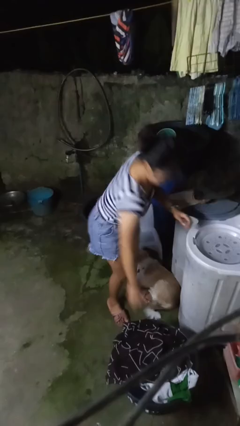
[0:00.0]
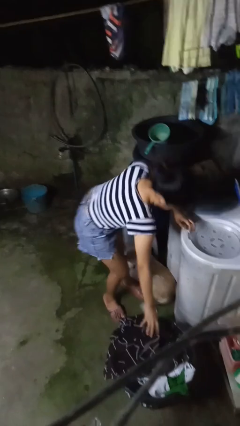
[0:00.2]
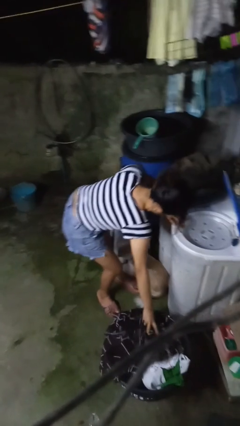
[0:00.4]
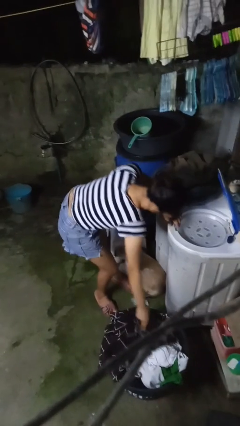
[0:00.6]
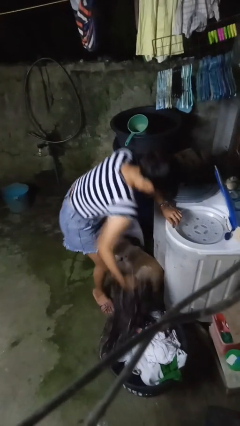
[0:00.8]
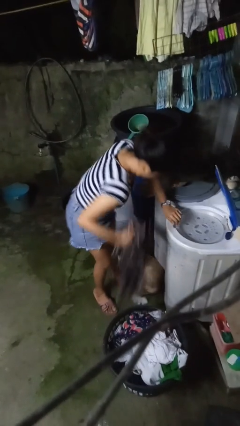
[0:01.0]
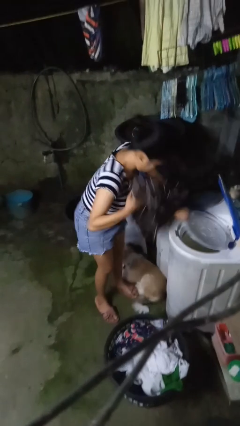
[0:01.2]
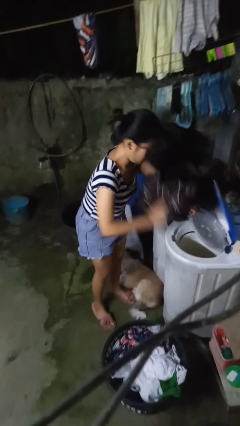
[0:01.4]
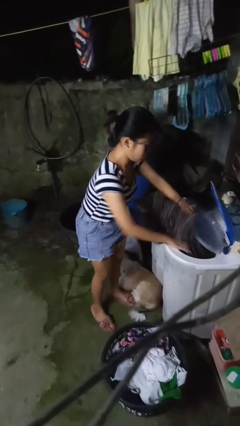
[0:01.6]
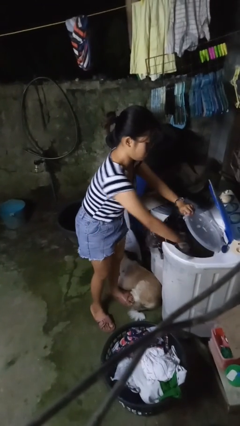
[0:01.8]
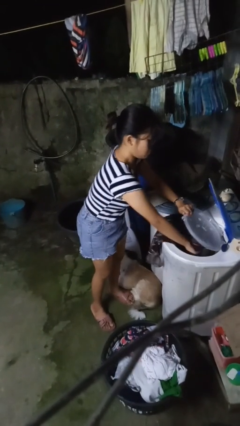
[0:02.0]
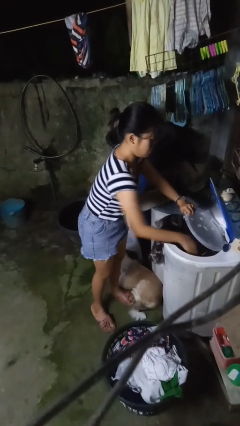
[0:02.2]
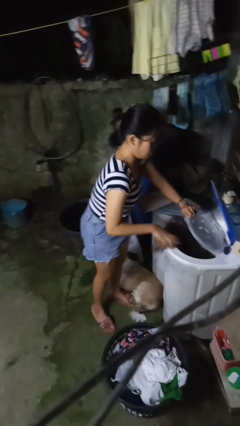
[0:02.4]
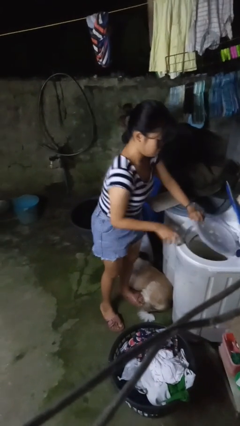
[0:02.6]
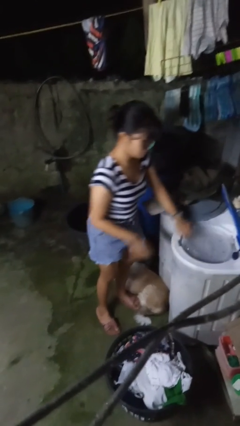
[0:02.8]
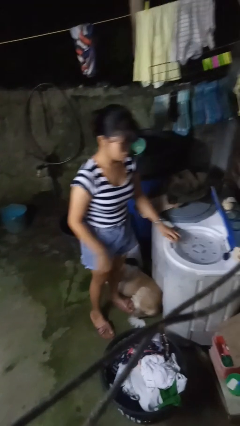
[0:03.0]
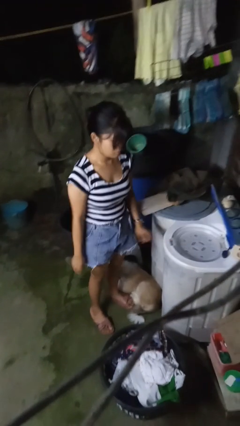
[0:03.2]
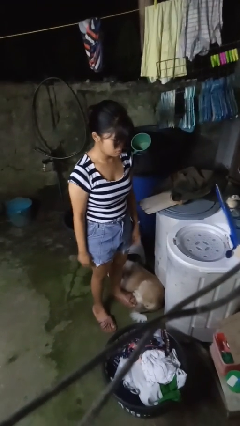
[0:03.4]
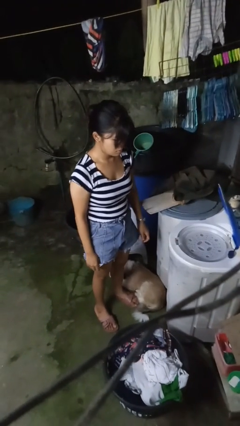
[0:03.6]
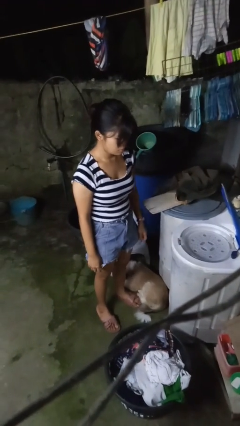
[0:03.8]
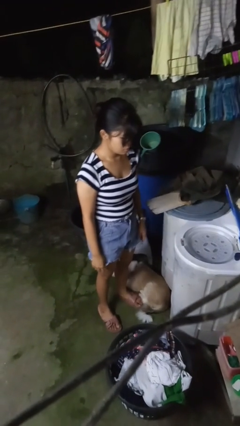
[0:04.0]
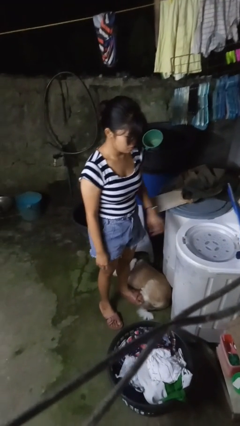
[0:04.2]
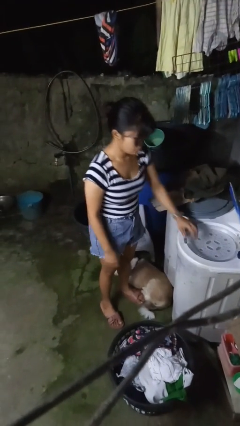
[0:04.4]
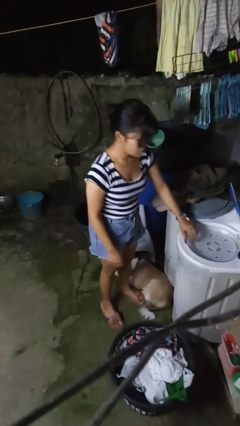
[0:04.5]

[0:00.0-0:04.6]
person loads dryer

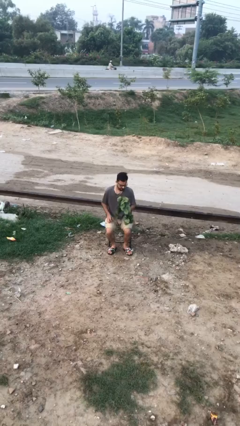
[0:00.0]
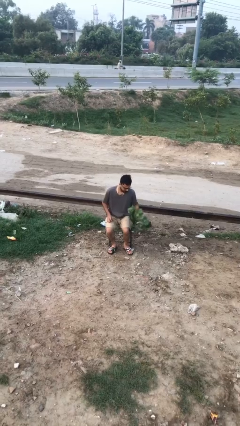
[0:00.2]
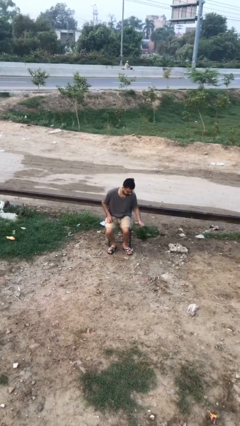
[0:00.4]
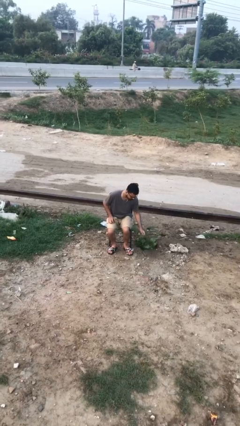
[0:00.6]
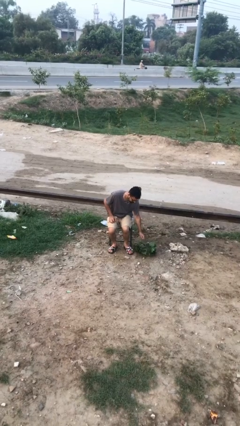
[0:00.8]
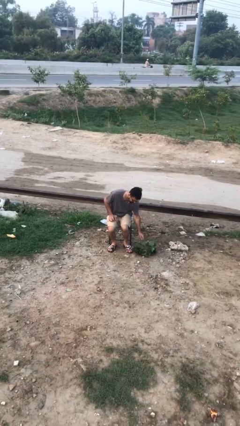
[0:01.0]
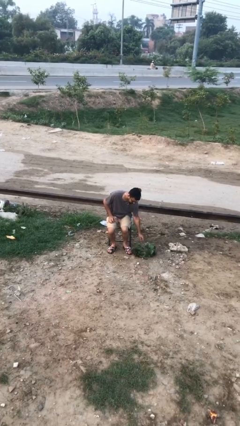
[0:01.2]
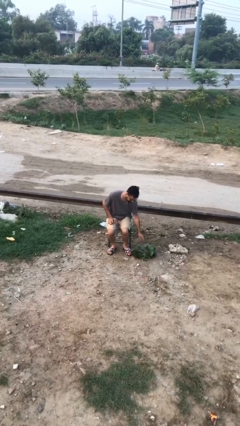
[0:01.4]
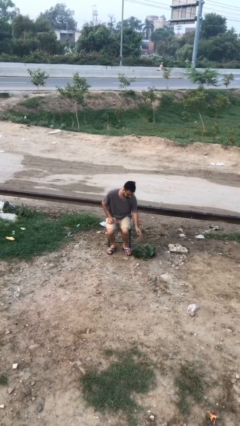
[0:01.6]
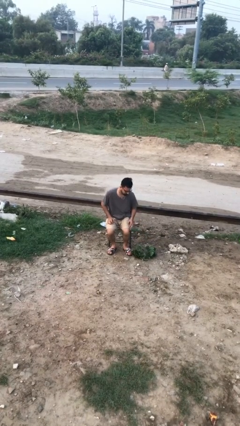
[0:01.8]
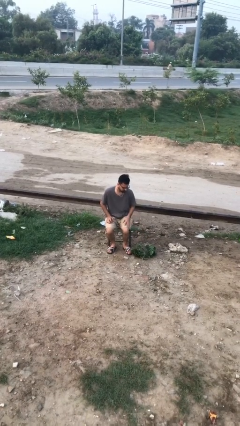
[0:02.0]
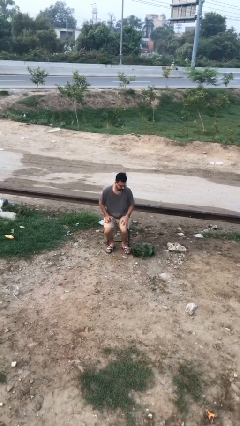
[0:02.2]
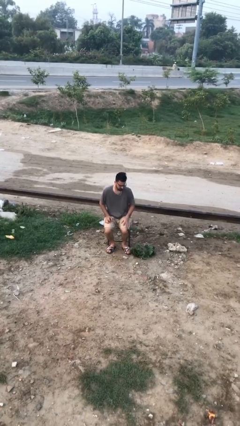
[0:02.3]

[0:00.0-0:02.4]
person puts down object on floor

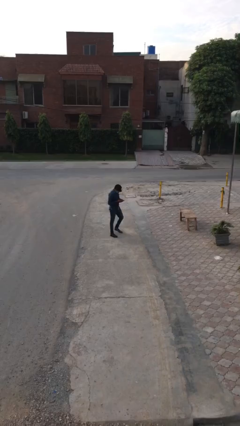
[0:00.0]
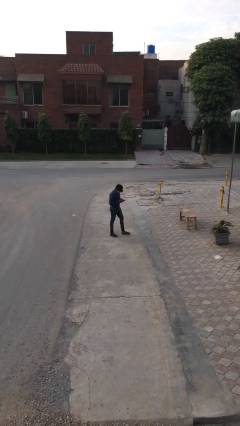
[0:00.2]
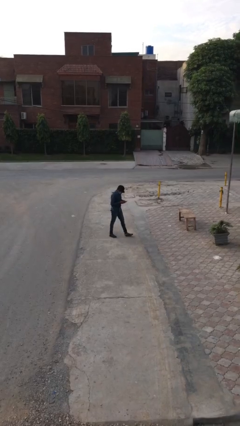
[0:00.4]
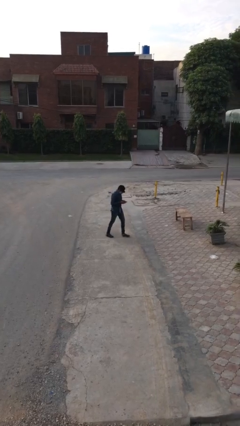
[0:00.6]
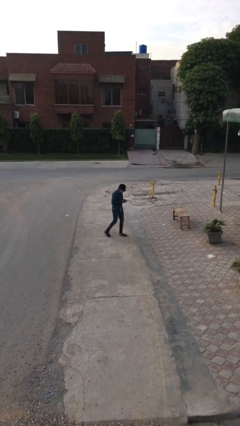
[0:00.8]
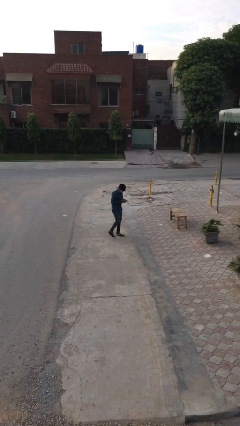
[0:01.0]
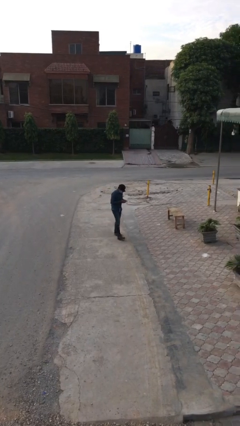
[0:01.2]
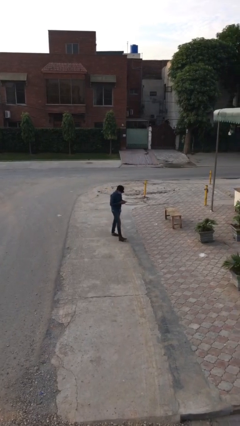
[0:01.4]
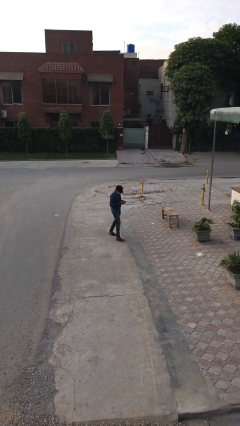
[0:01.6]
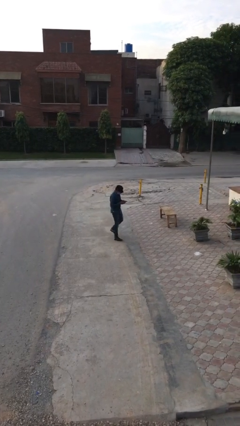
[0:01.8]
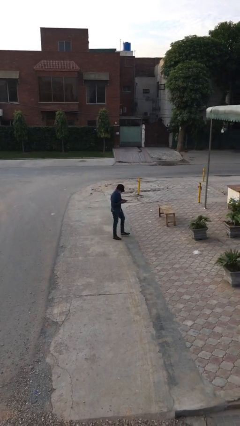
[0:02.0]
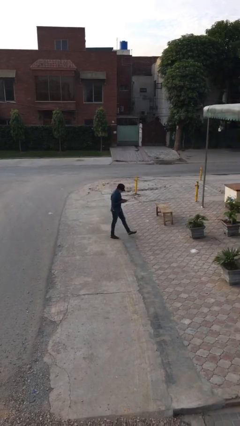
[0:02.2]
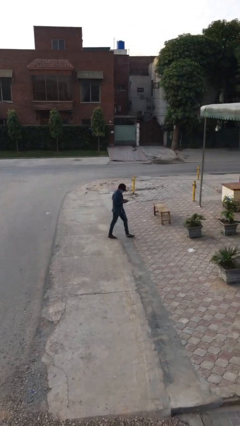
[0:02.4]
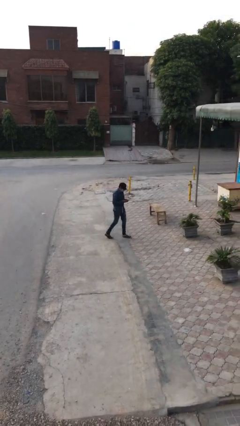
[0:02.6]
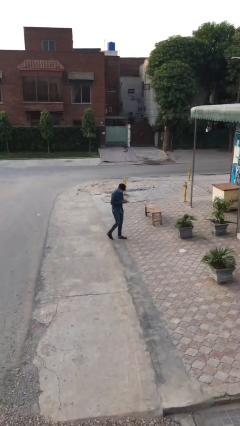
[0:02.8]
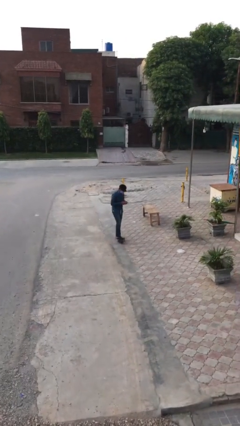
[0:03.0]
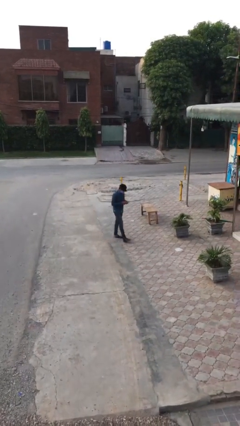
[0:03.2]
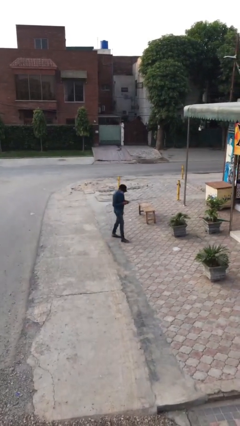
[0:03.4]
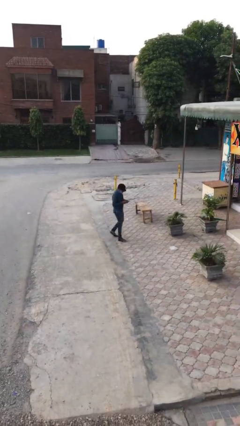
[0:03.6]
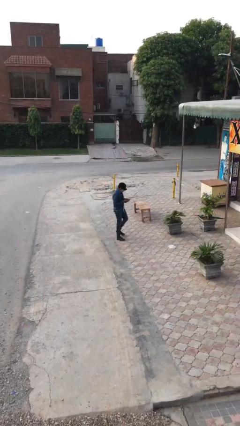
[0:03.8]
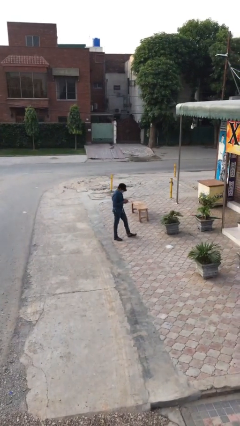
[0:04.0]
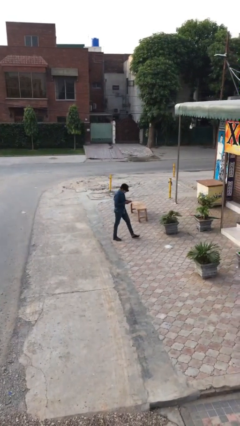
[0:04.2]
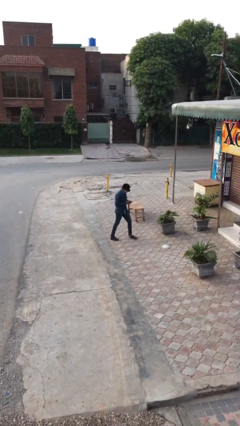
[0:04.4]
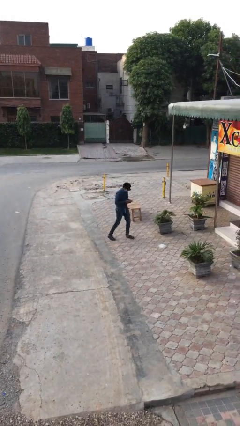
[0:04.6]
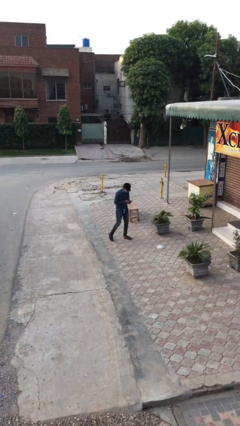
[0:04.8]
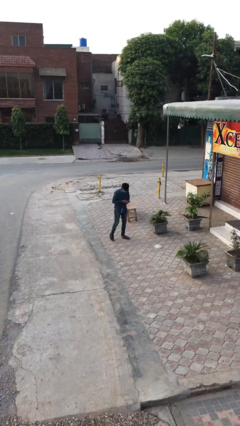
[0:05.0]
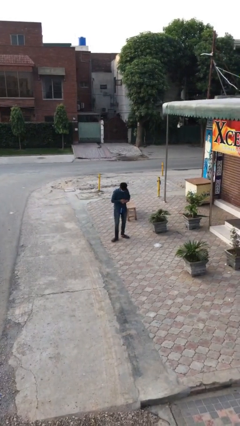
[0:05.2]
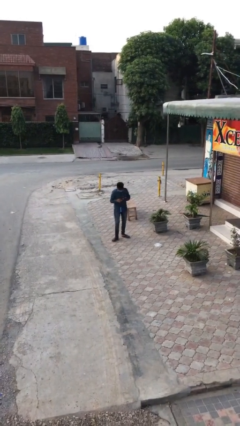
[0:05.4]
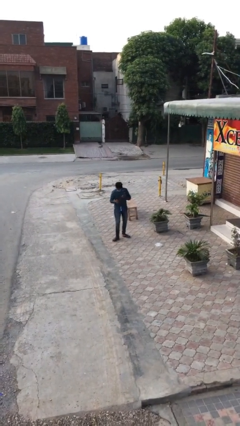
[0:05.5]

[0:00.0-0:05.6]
person texts on phone

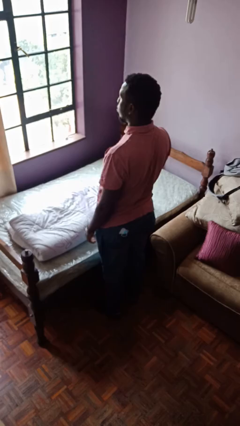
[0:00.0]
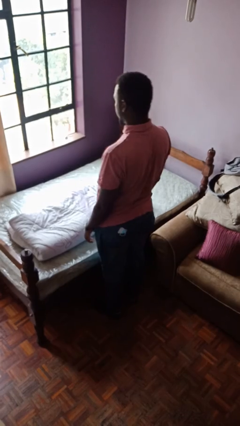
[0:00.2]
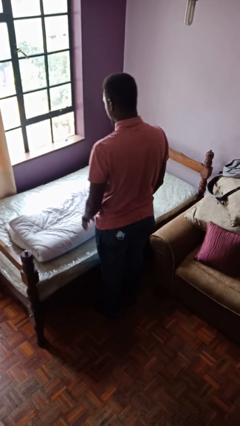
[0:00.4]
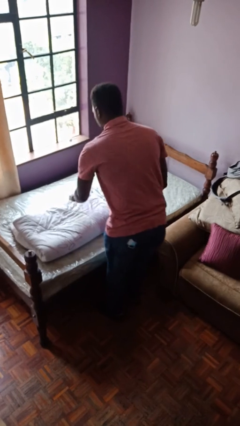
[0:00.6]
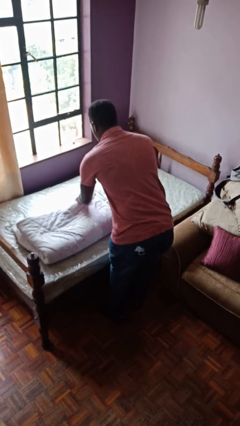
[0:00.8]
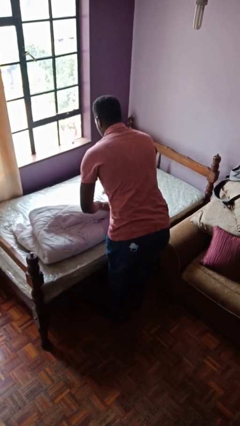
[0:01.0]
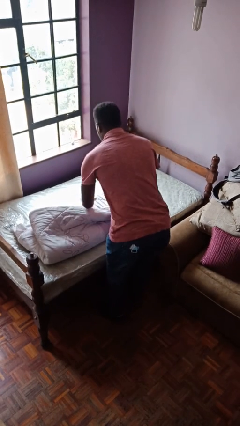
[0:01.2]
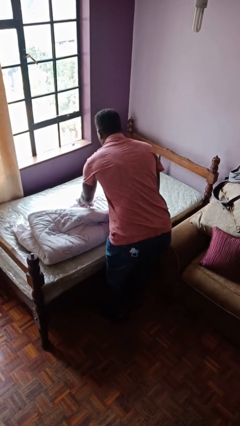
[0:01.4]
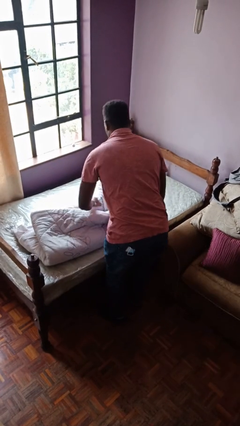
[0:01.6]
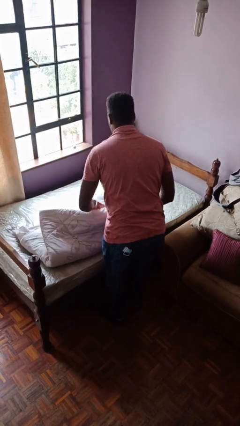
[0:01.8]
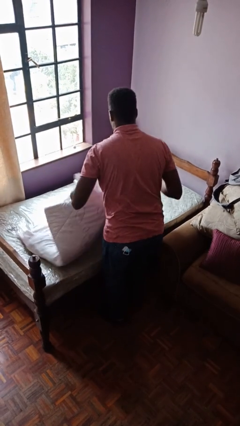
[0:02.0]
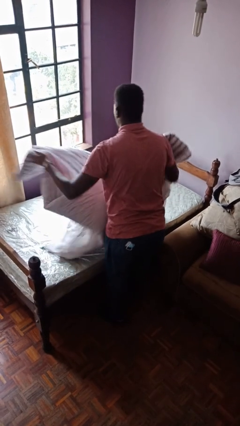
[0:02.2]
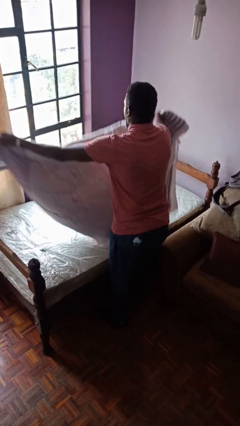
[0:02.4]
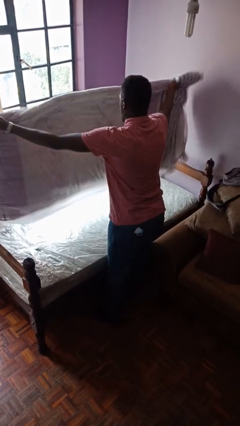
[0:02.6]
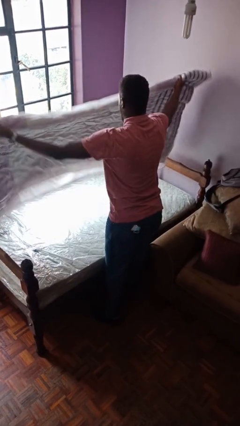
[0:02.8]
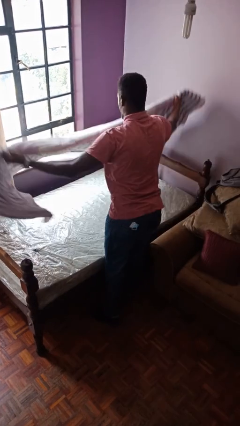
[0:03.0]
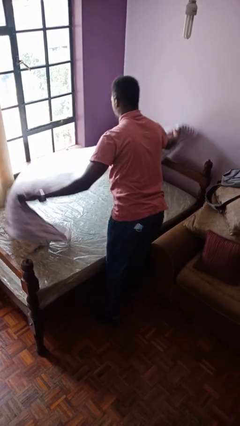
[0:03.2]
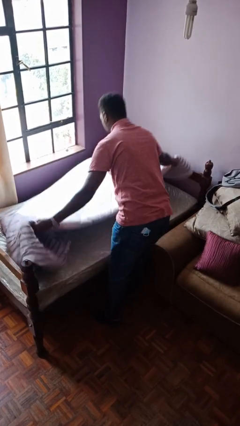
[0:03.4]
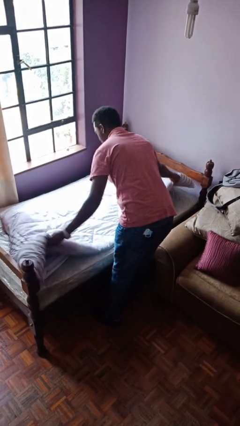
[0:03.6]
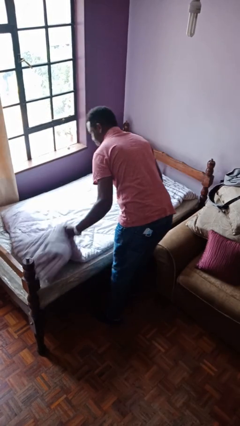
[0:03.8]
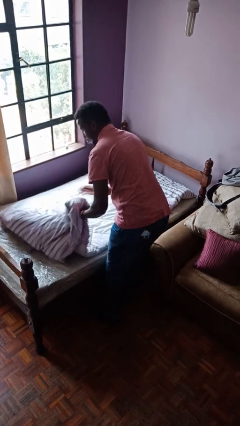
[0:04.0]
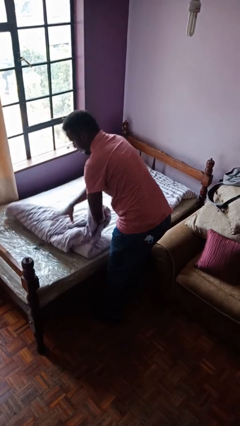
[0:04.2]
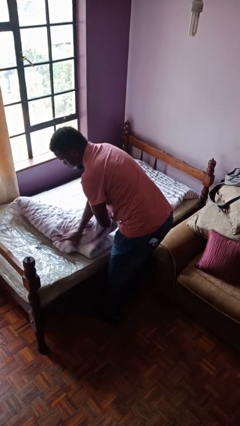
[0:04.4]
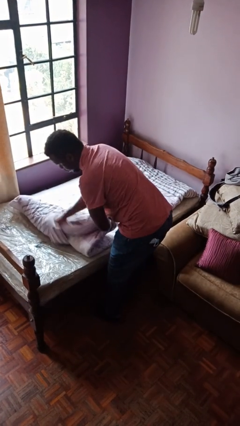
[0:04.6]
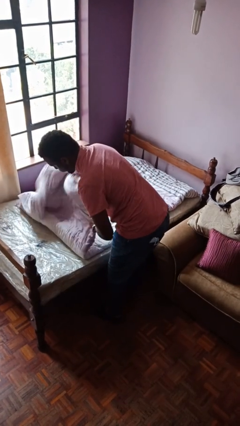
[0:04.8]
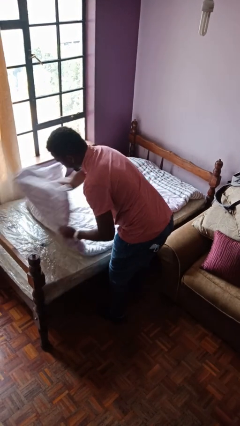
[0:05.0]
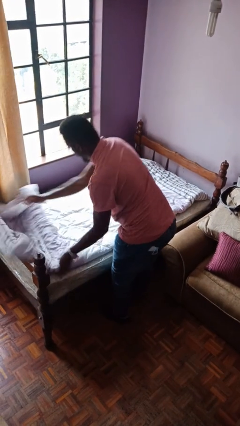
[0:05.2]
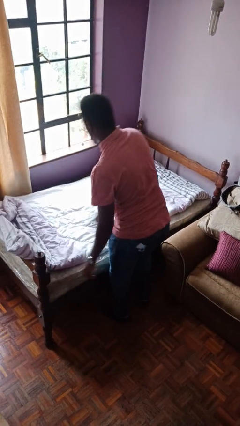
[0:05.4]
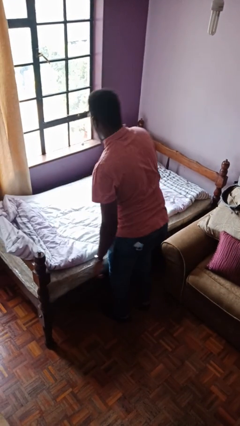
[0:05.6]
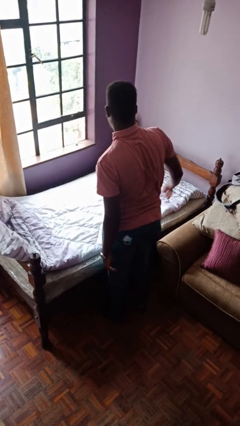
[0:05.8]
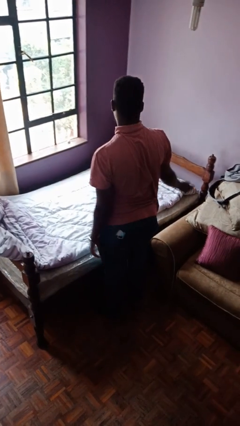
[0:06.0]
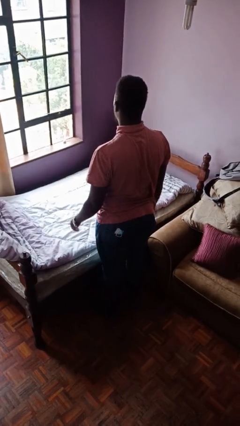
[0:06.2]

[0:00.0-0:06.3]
person unfolds blanket
